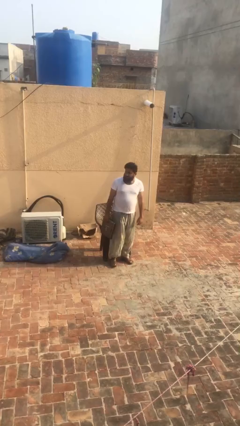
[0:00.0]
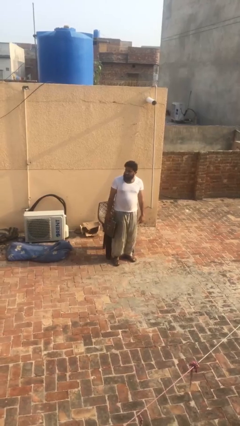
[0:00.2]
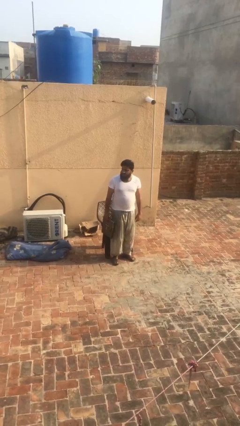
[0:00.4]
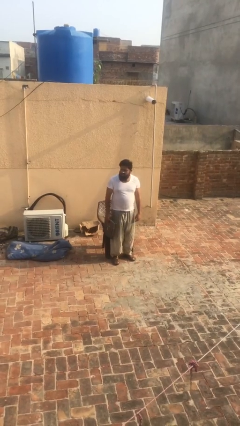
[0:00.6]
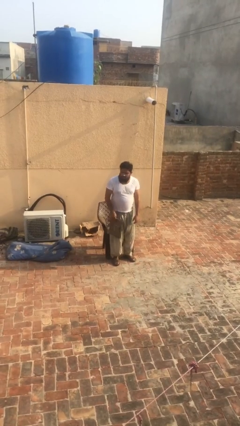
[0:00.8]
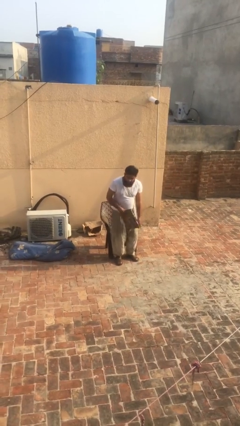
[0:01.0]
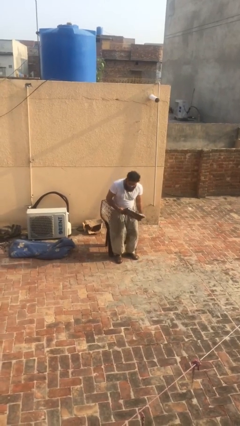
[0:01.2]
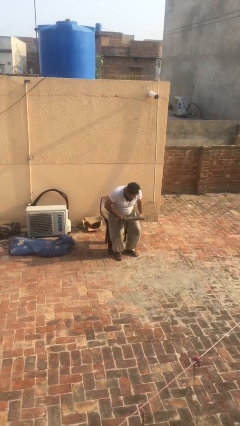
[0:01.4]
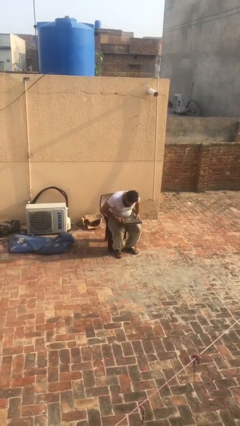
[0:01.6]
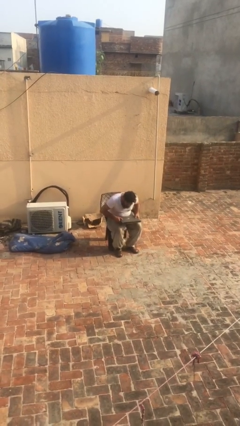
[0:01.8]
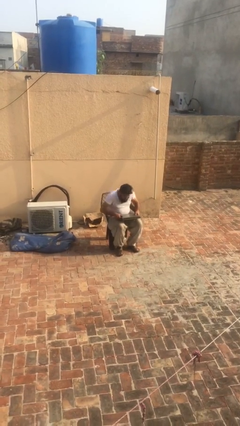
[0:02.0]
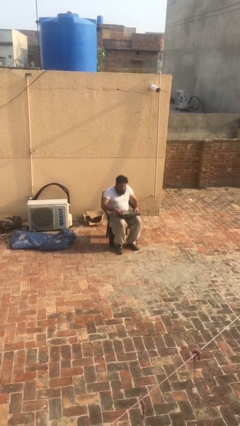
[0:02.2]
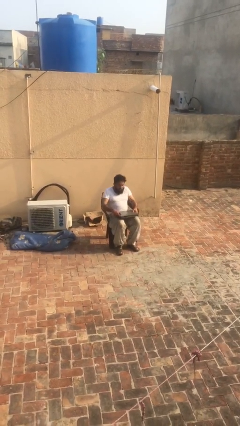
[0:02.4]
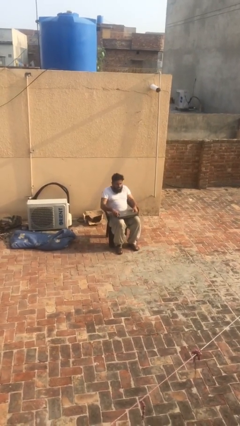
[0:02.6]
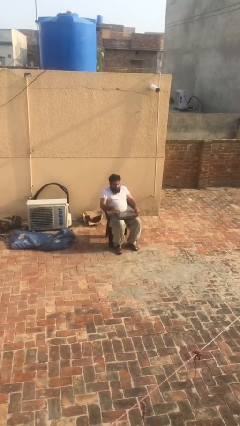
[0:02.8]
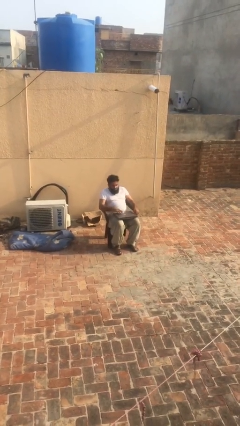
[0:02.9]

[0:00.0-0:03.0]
person sits down

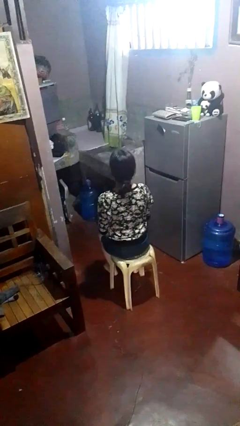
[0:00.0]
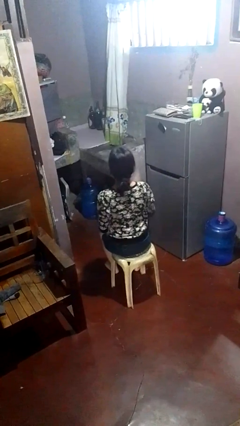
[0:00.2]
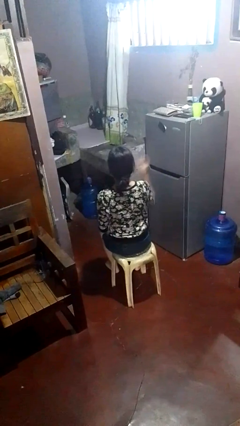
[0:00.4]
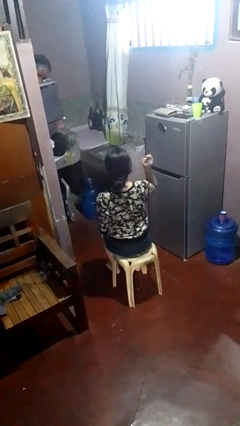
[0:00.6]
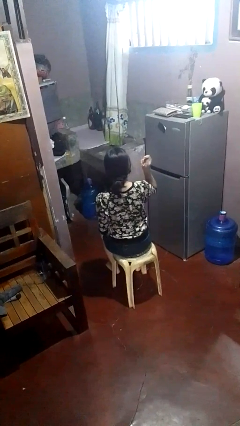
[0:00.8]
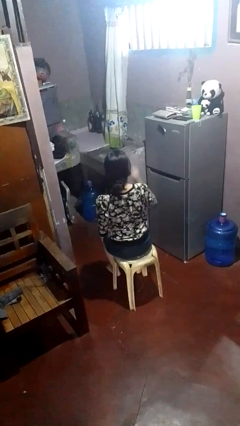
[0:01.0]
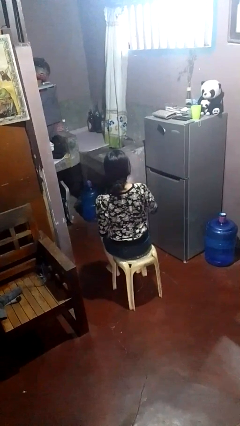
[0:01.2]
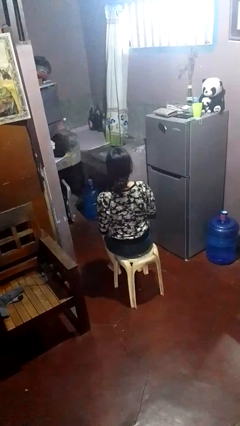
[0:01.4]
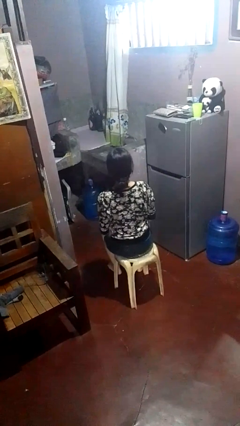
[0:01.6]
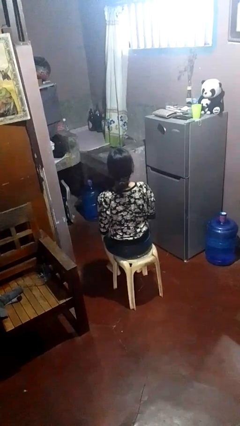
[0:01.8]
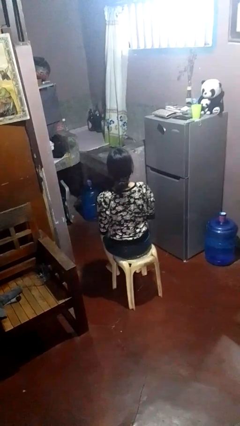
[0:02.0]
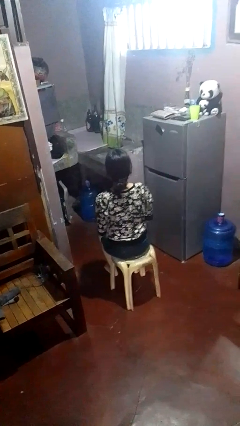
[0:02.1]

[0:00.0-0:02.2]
person snaps fingers

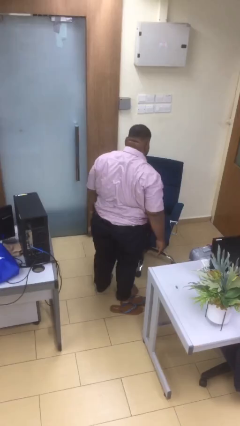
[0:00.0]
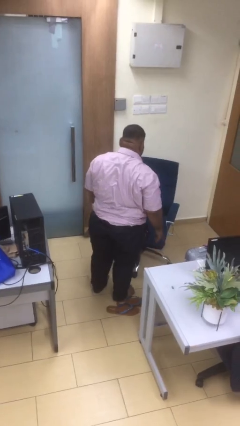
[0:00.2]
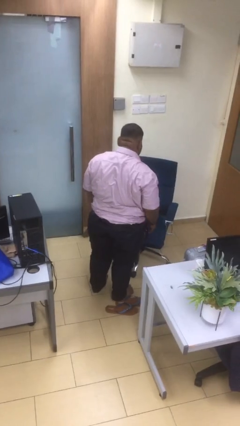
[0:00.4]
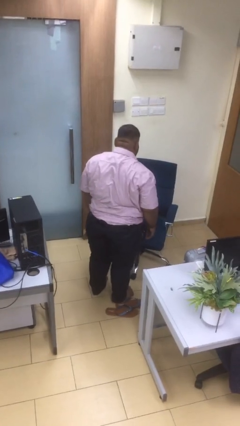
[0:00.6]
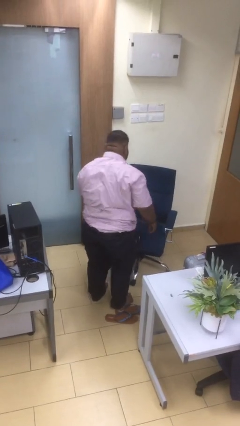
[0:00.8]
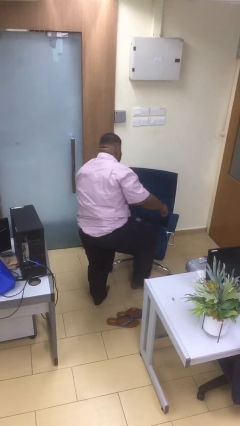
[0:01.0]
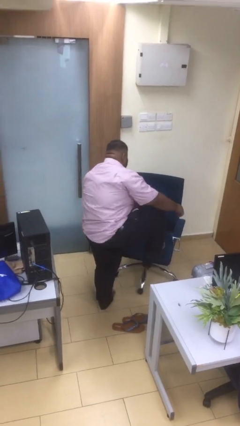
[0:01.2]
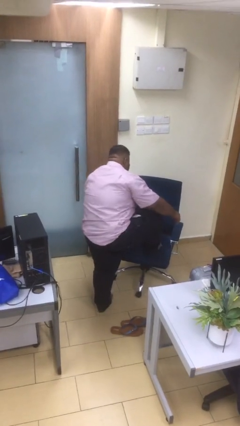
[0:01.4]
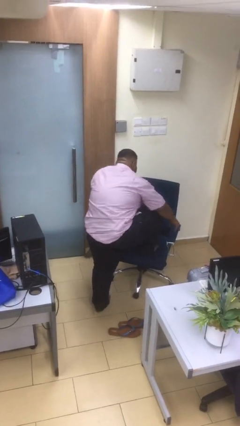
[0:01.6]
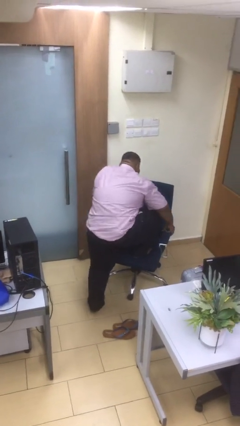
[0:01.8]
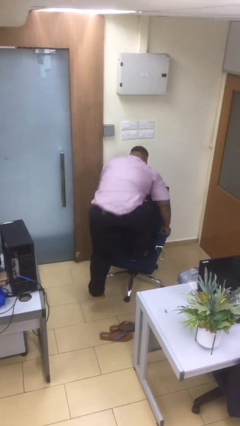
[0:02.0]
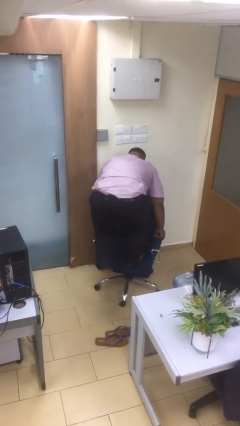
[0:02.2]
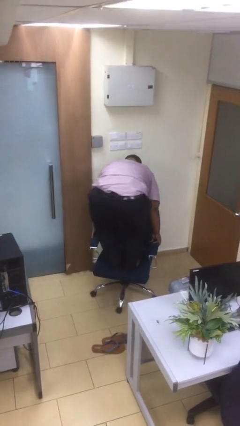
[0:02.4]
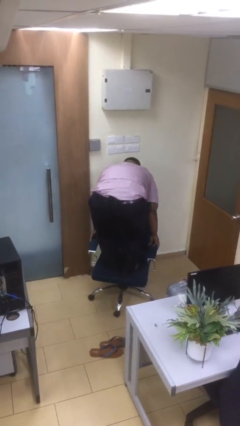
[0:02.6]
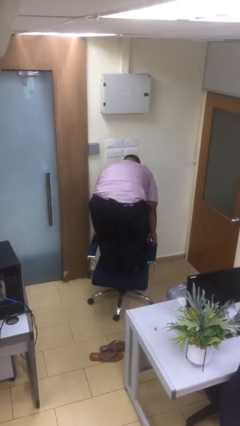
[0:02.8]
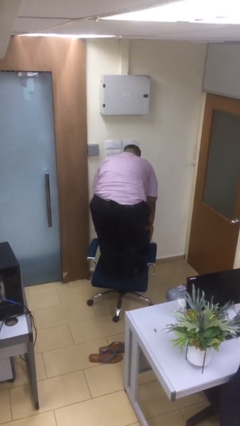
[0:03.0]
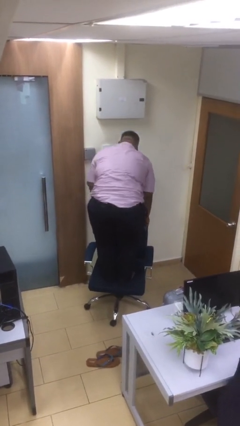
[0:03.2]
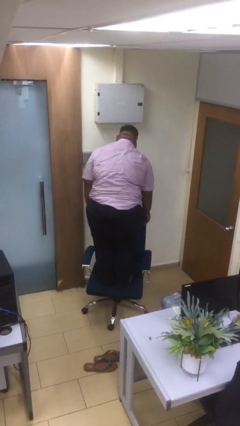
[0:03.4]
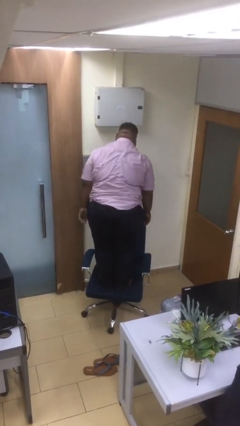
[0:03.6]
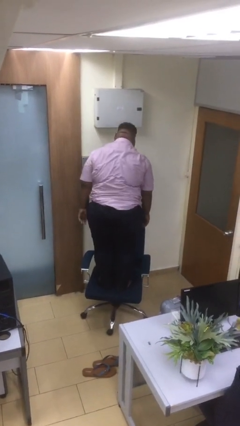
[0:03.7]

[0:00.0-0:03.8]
person climbs on chair

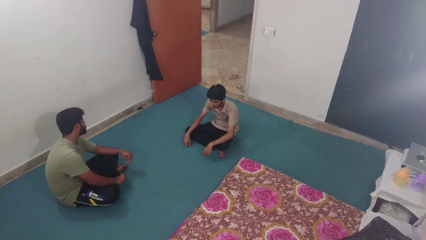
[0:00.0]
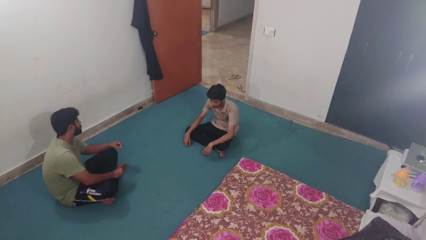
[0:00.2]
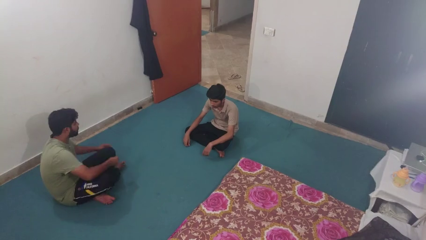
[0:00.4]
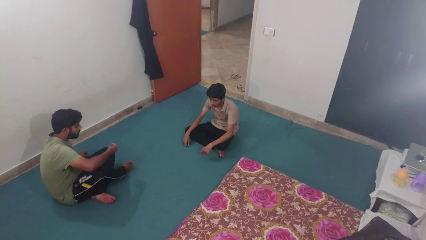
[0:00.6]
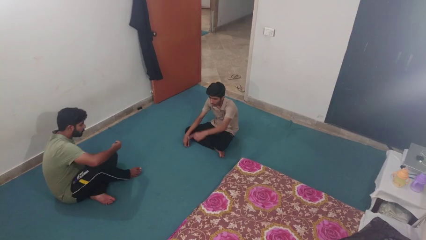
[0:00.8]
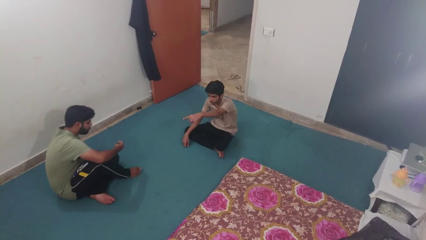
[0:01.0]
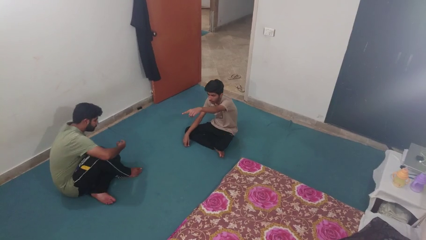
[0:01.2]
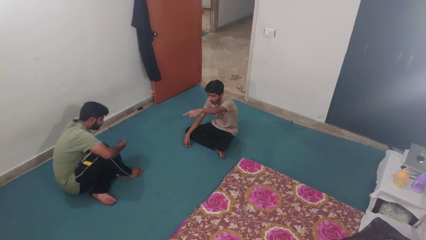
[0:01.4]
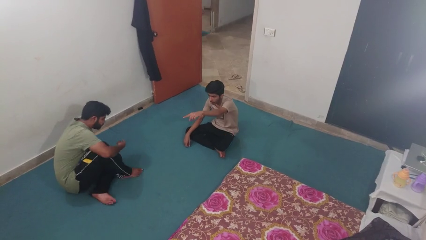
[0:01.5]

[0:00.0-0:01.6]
person points at person

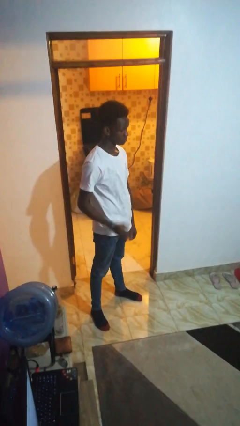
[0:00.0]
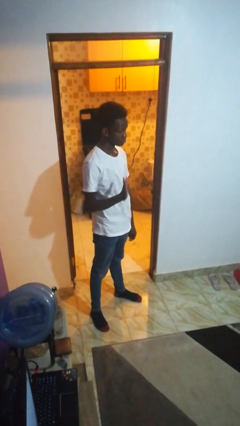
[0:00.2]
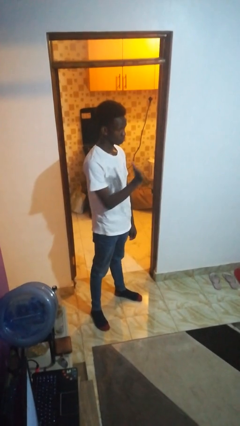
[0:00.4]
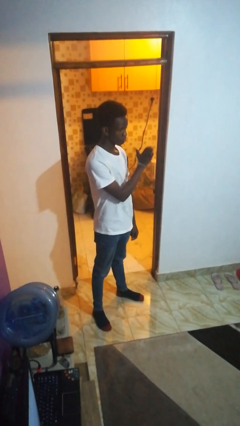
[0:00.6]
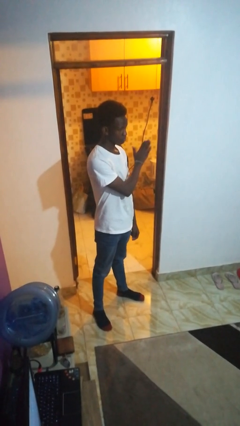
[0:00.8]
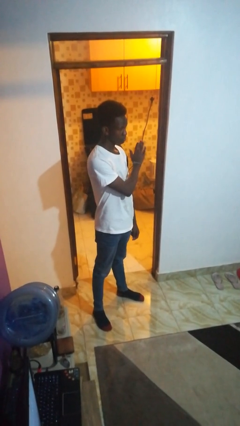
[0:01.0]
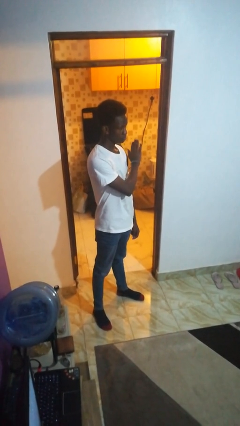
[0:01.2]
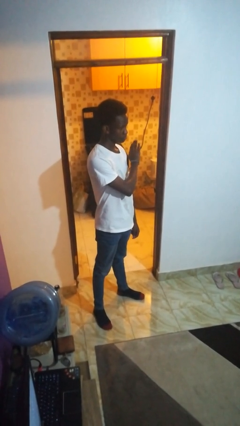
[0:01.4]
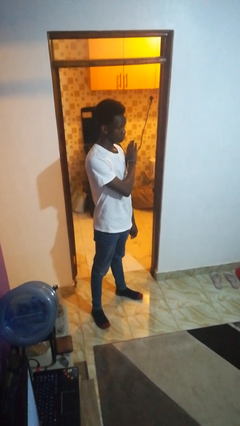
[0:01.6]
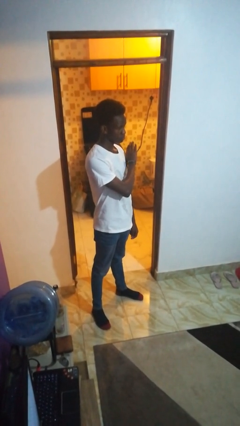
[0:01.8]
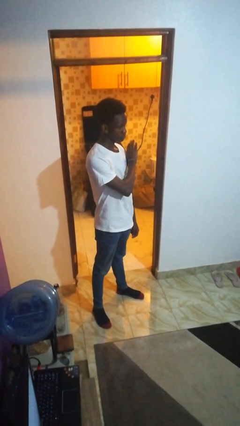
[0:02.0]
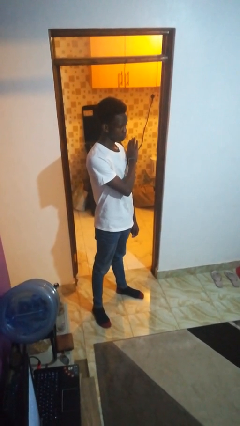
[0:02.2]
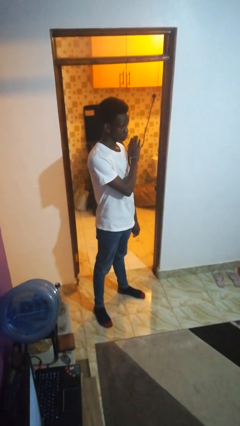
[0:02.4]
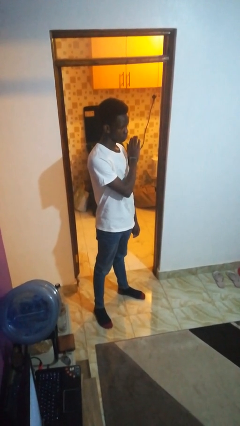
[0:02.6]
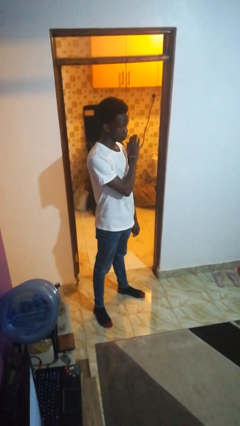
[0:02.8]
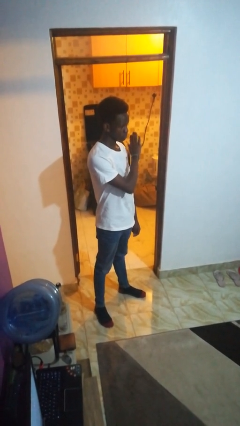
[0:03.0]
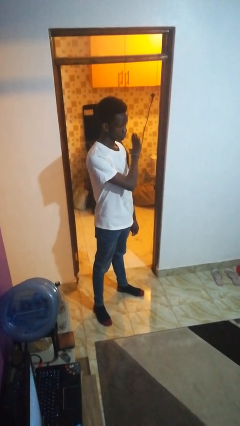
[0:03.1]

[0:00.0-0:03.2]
person gestures swipe left

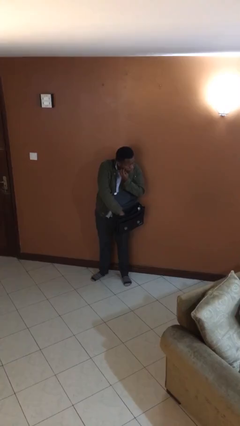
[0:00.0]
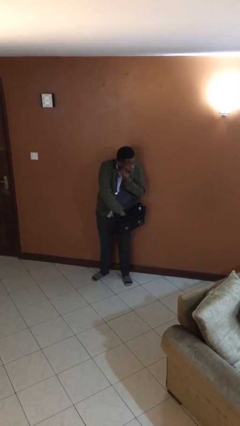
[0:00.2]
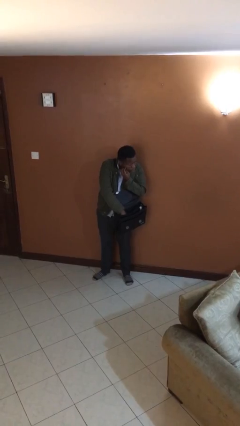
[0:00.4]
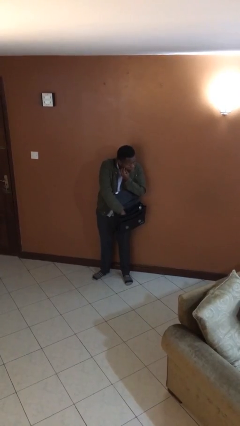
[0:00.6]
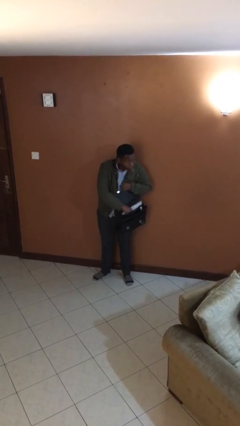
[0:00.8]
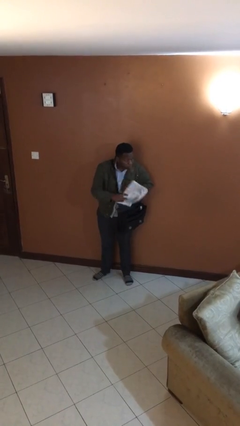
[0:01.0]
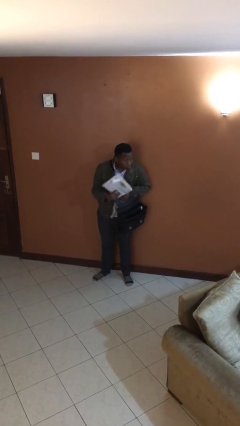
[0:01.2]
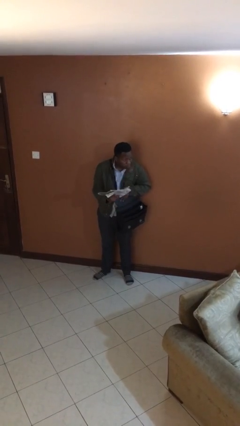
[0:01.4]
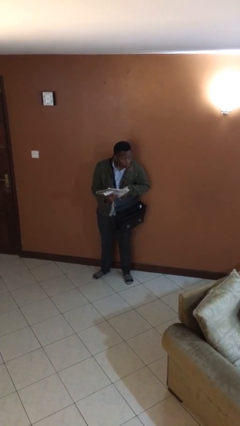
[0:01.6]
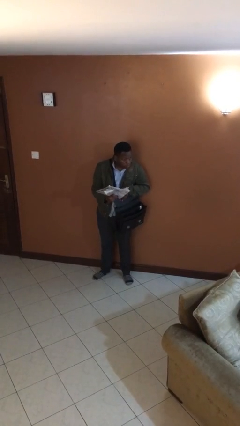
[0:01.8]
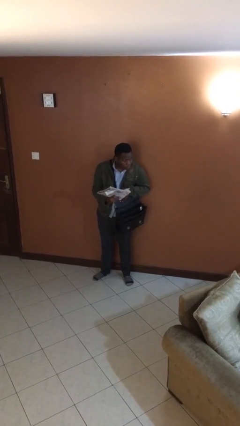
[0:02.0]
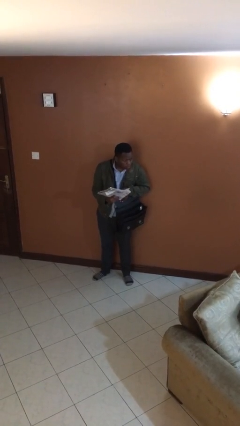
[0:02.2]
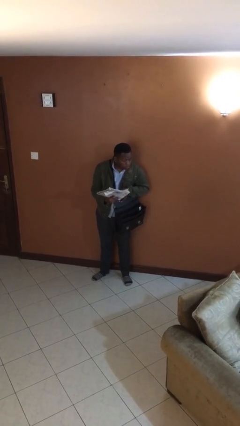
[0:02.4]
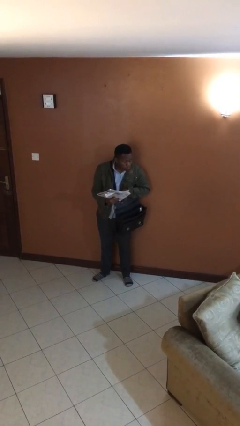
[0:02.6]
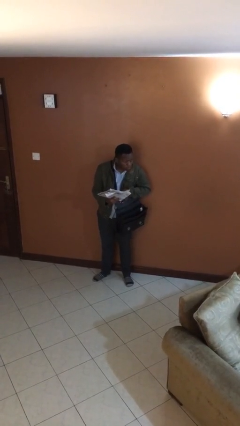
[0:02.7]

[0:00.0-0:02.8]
person takes object from purse

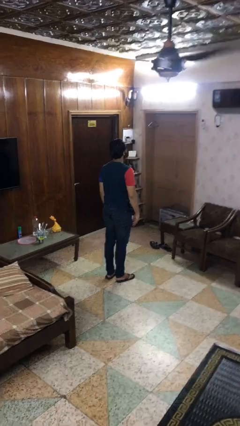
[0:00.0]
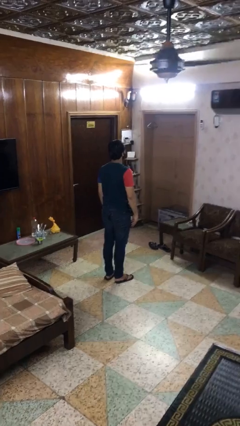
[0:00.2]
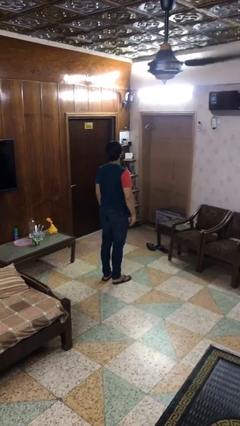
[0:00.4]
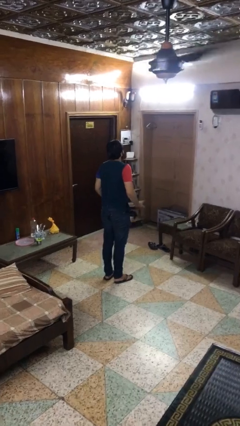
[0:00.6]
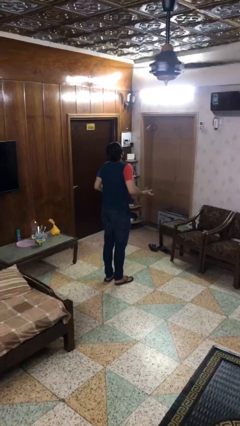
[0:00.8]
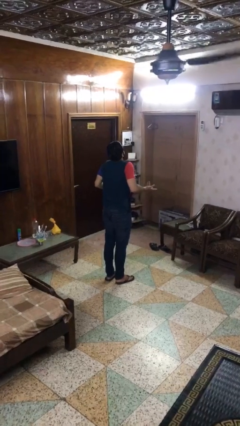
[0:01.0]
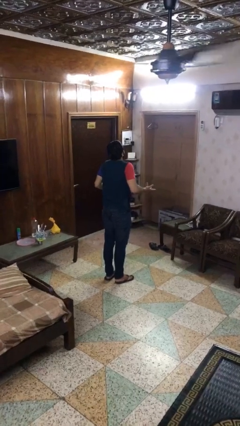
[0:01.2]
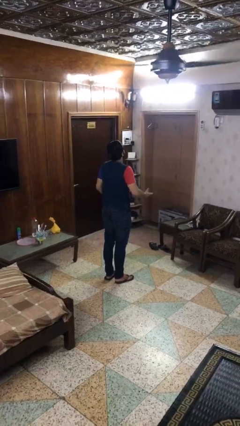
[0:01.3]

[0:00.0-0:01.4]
person shrugs
